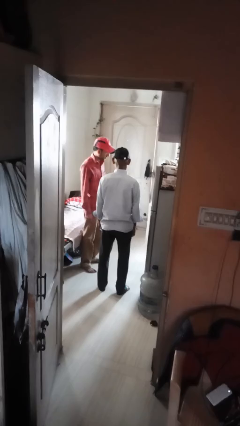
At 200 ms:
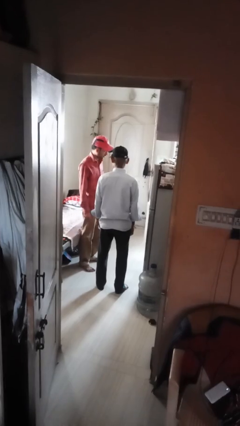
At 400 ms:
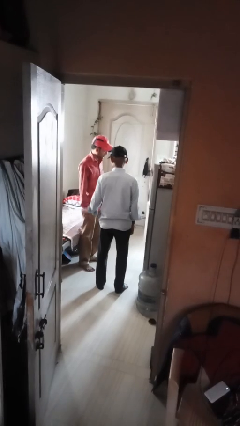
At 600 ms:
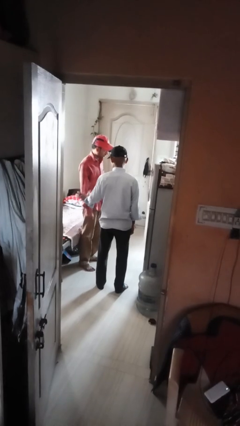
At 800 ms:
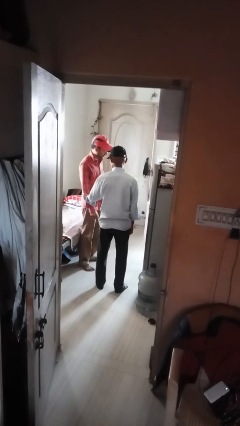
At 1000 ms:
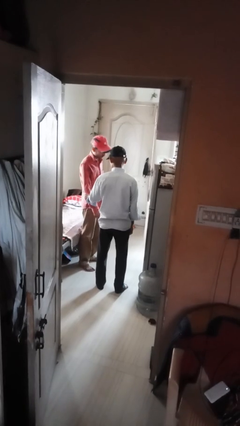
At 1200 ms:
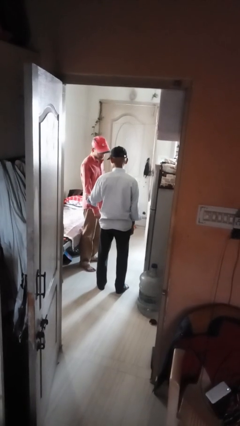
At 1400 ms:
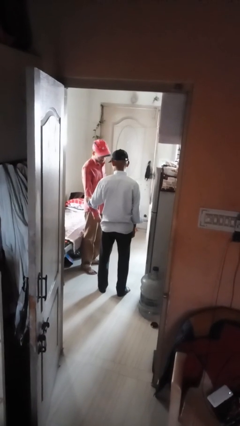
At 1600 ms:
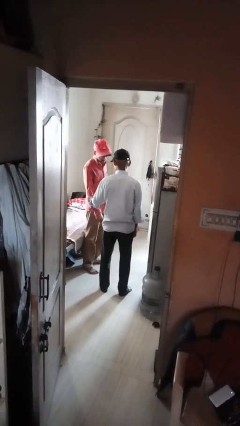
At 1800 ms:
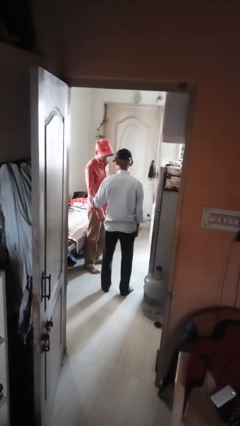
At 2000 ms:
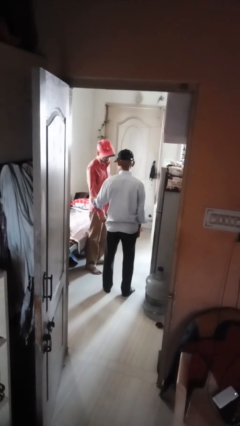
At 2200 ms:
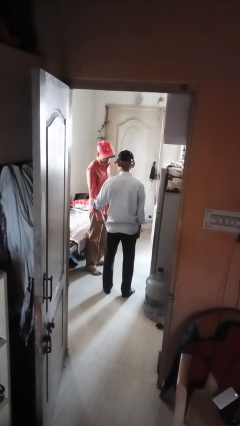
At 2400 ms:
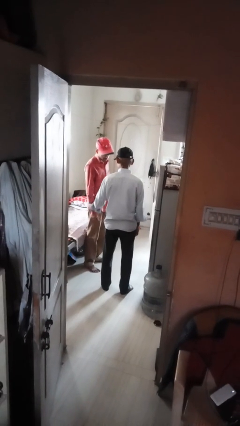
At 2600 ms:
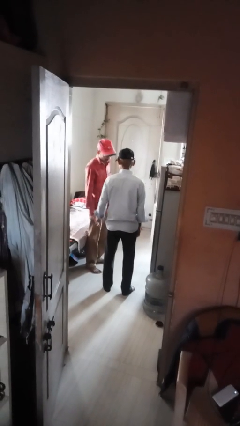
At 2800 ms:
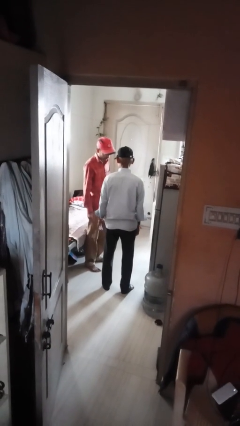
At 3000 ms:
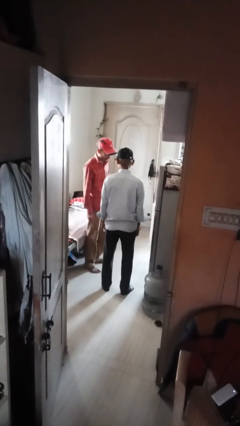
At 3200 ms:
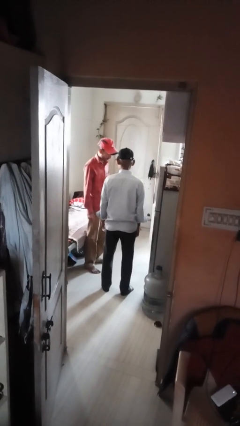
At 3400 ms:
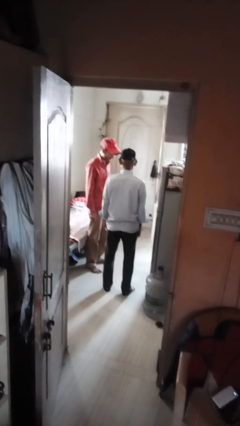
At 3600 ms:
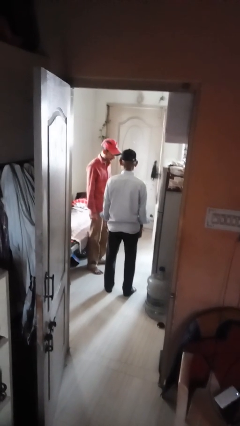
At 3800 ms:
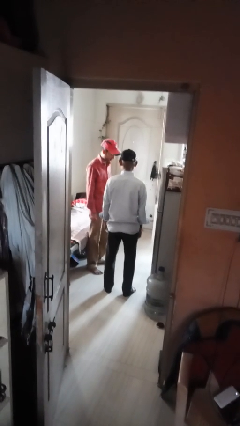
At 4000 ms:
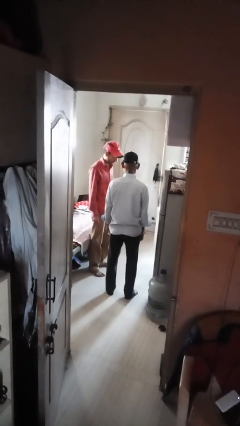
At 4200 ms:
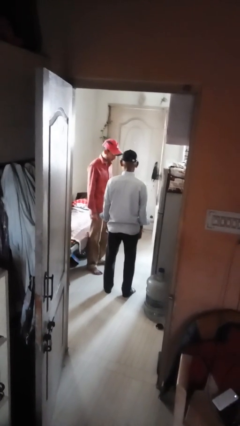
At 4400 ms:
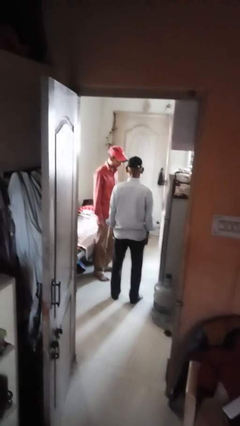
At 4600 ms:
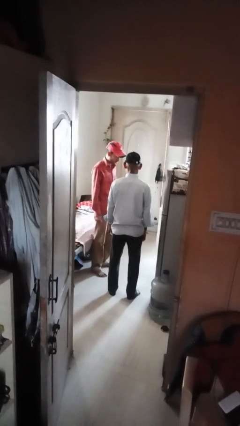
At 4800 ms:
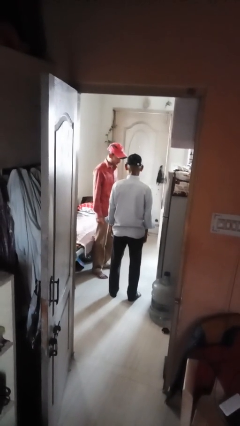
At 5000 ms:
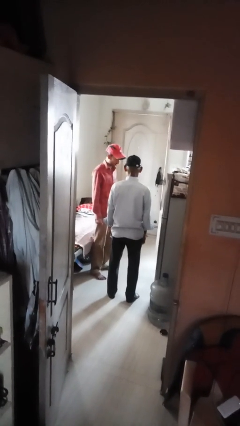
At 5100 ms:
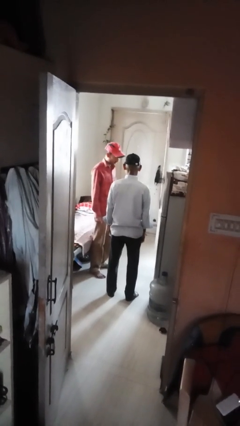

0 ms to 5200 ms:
person grabs person by forearm

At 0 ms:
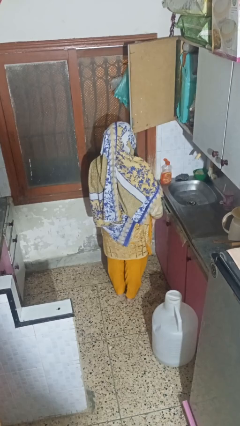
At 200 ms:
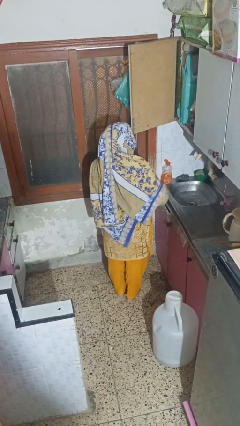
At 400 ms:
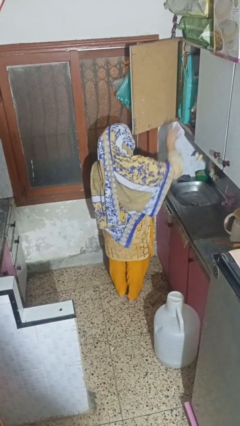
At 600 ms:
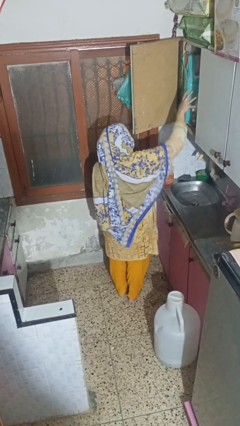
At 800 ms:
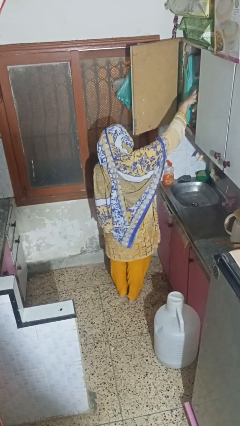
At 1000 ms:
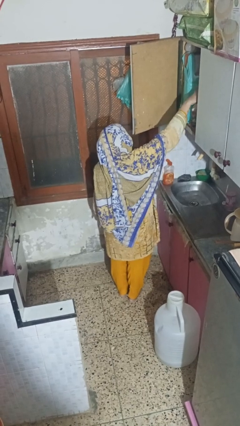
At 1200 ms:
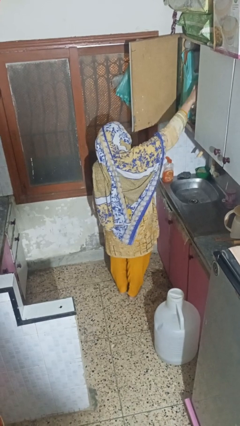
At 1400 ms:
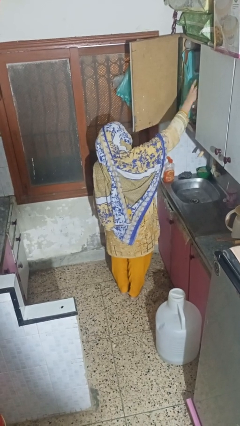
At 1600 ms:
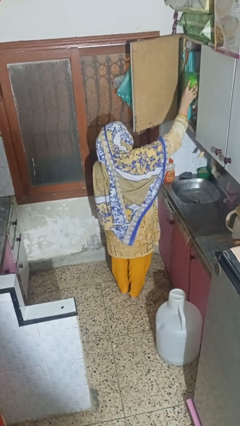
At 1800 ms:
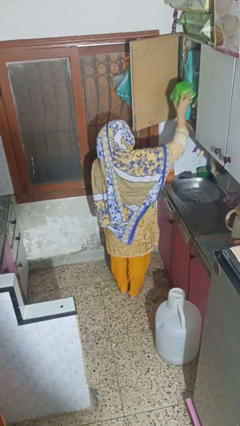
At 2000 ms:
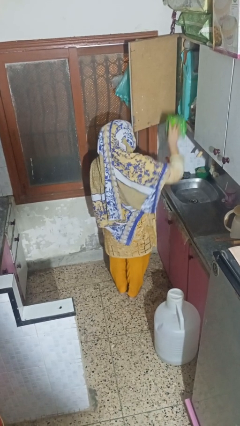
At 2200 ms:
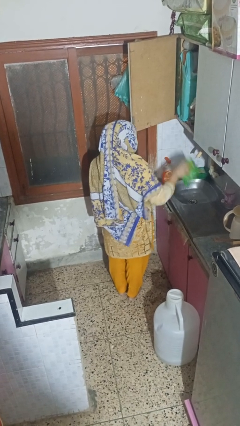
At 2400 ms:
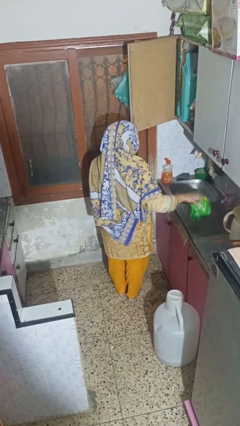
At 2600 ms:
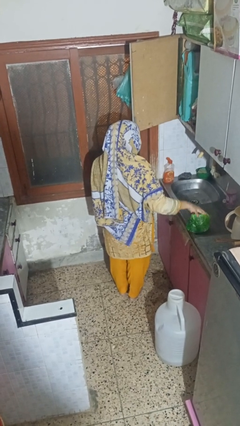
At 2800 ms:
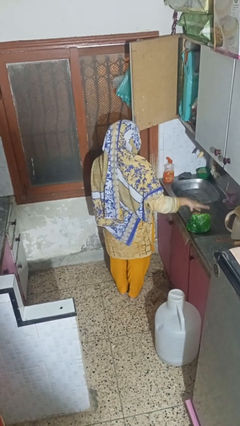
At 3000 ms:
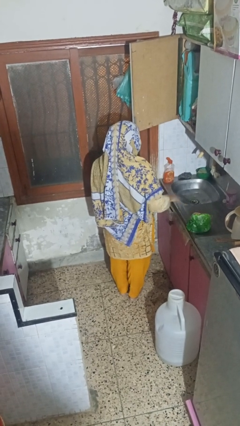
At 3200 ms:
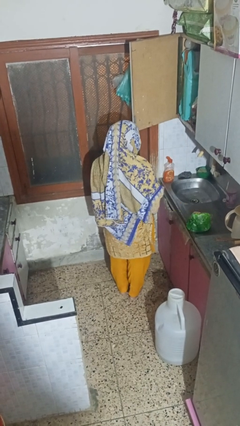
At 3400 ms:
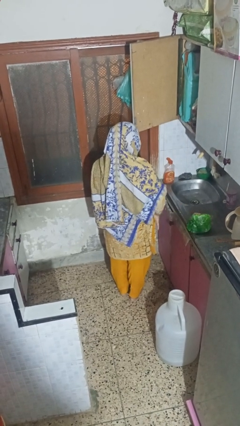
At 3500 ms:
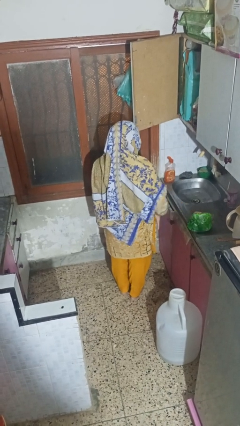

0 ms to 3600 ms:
person takes object from cabinet

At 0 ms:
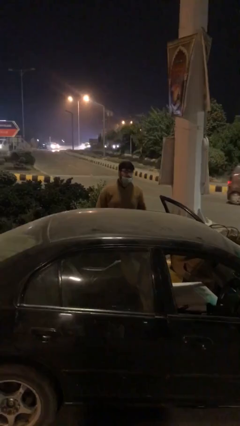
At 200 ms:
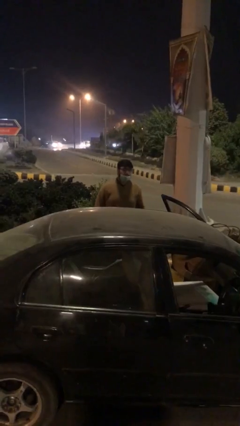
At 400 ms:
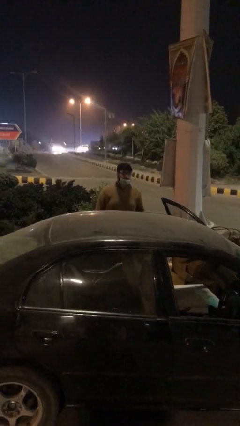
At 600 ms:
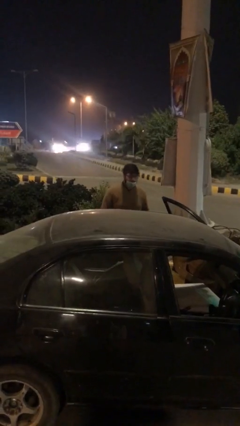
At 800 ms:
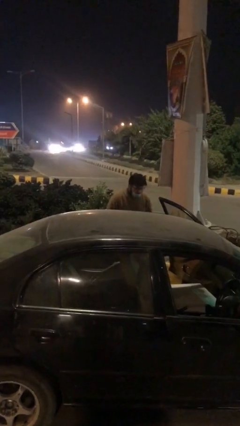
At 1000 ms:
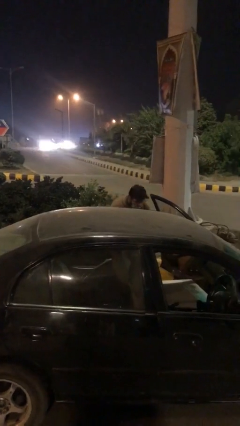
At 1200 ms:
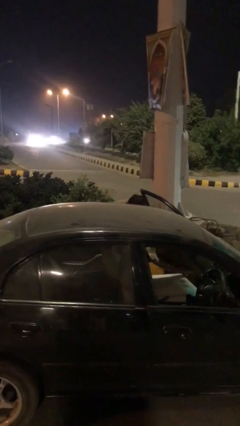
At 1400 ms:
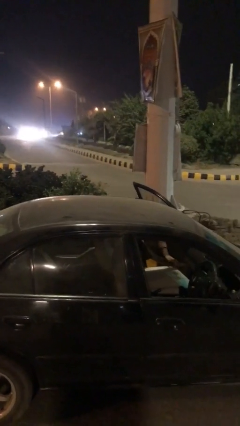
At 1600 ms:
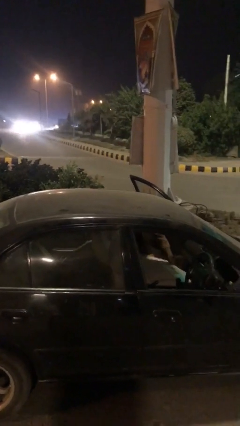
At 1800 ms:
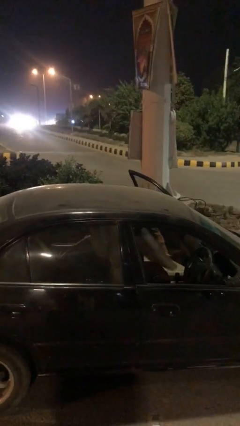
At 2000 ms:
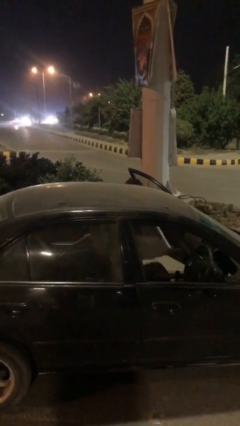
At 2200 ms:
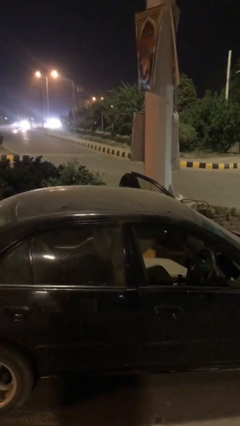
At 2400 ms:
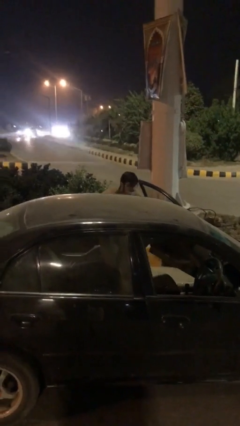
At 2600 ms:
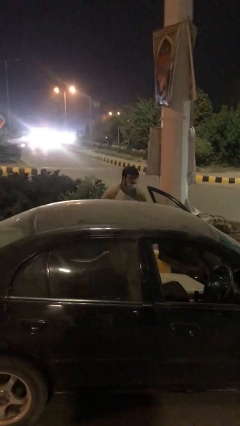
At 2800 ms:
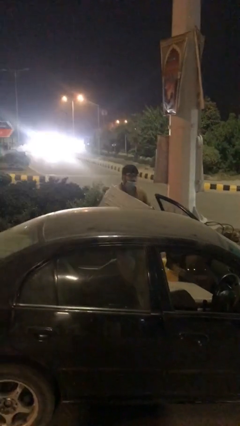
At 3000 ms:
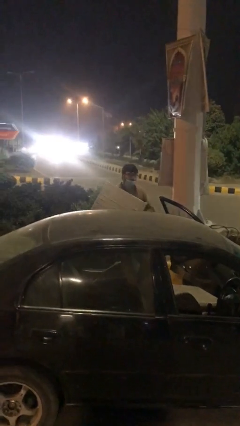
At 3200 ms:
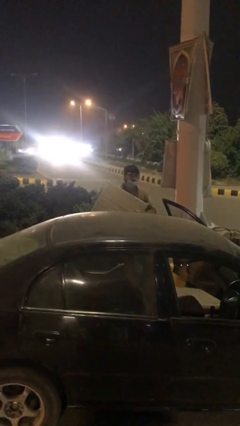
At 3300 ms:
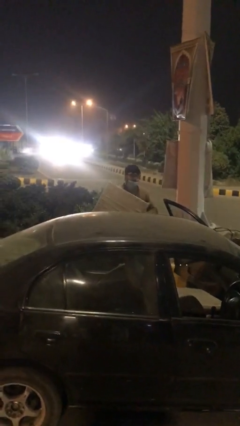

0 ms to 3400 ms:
person unloads car

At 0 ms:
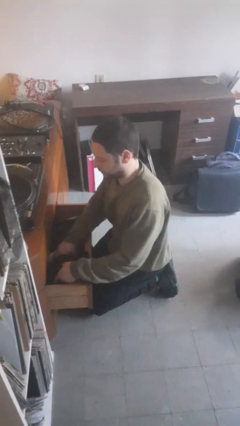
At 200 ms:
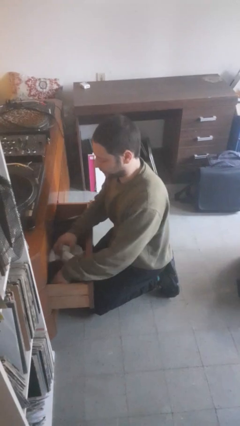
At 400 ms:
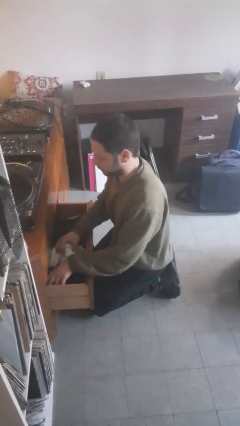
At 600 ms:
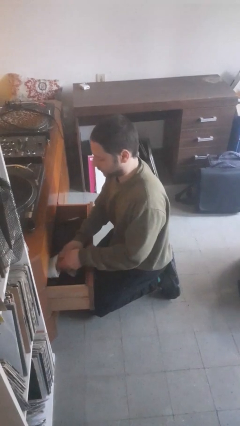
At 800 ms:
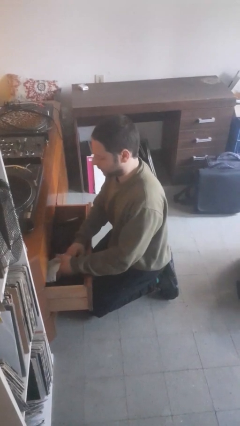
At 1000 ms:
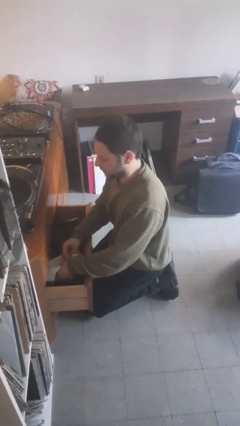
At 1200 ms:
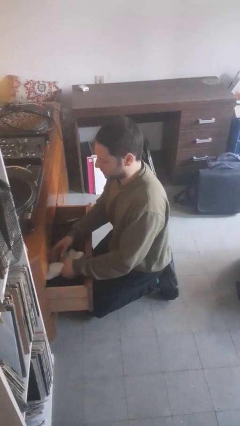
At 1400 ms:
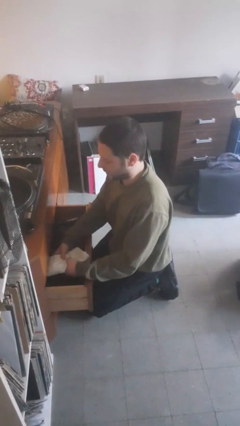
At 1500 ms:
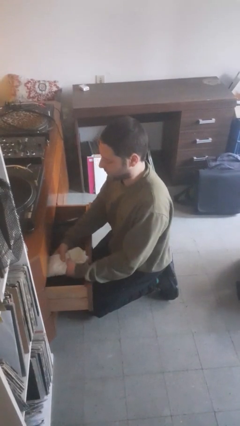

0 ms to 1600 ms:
person puts clothes into dresser

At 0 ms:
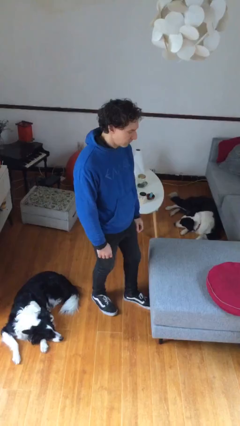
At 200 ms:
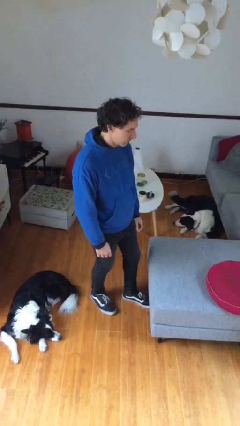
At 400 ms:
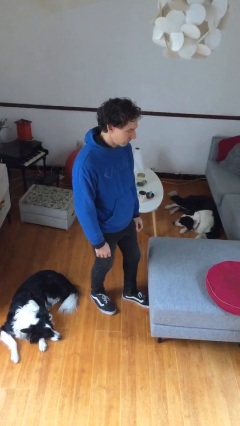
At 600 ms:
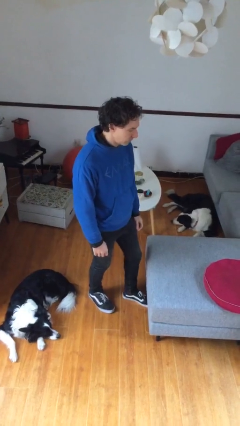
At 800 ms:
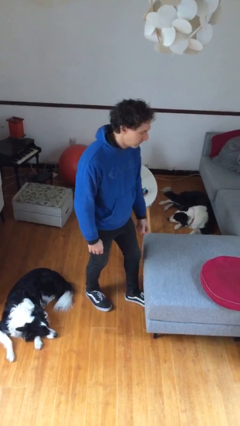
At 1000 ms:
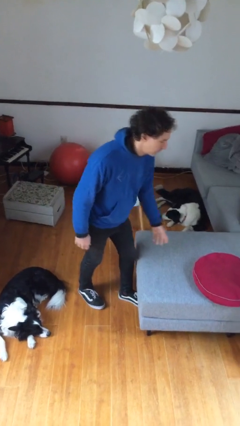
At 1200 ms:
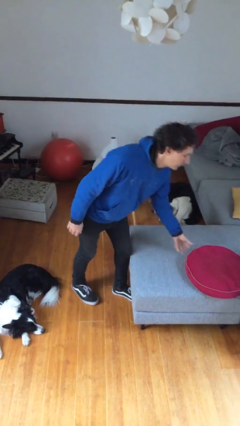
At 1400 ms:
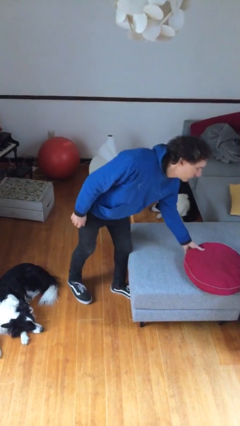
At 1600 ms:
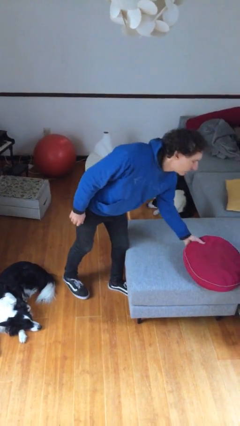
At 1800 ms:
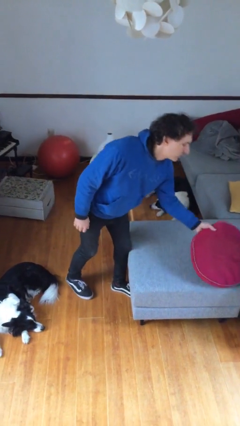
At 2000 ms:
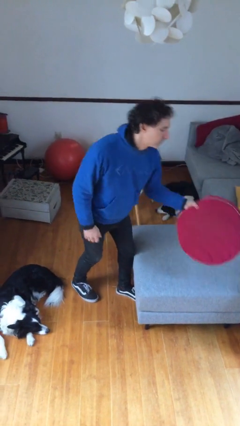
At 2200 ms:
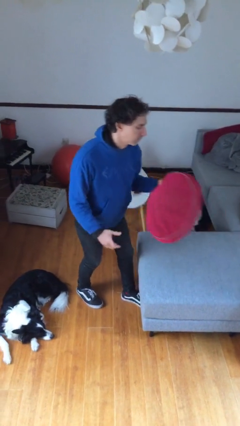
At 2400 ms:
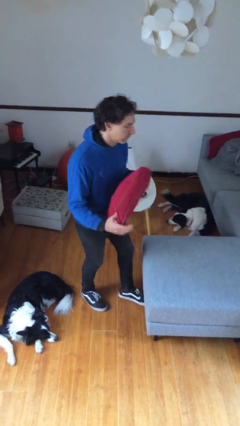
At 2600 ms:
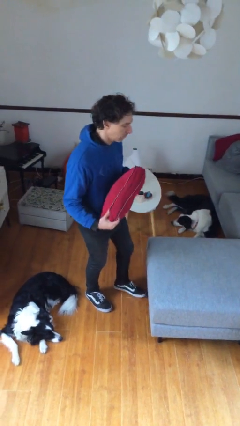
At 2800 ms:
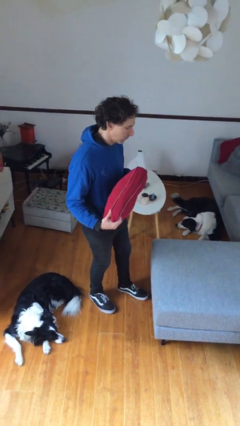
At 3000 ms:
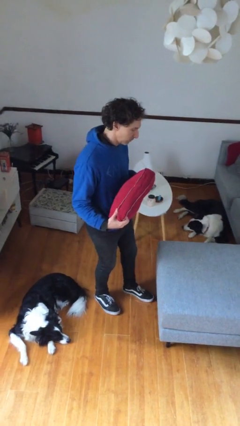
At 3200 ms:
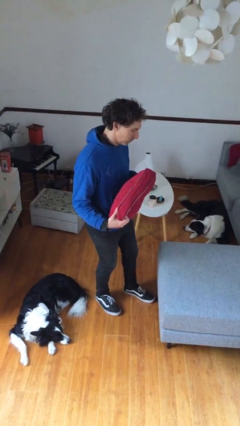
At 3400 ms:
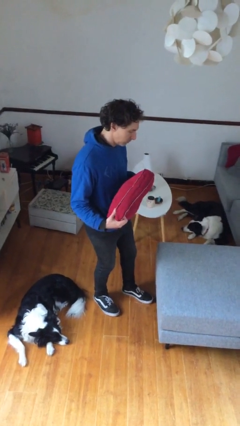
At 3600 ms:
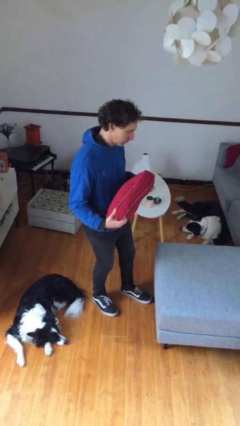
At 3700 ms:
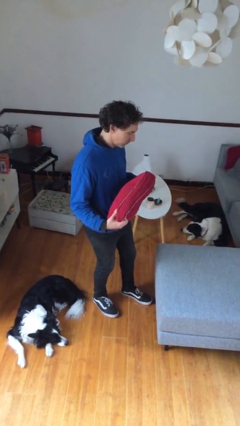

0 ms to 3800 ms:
person picks up object from couch
